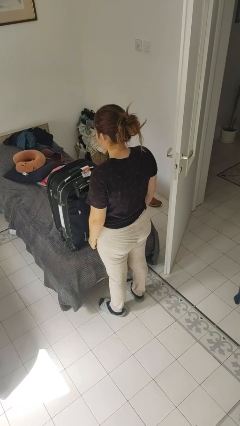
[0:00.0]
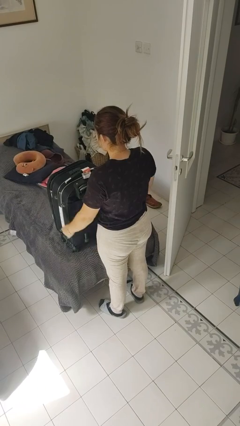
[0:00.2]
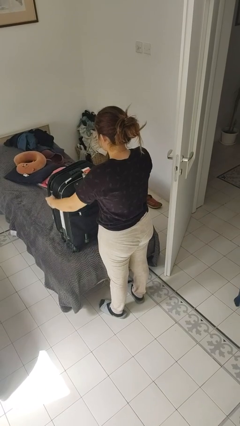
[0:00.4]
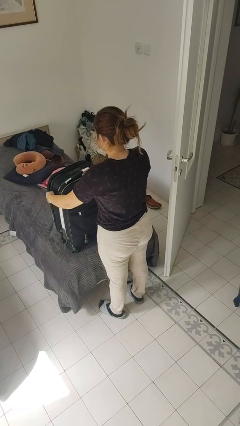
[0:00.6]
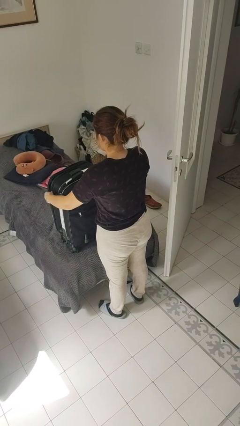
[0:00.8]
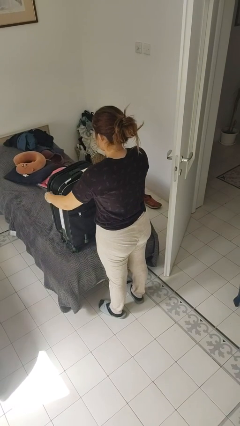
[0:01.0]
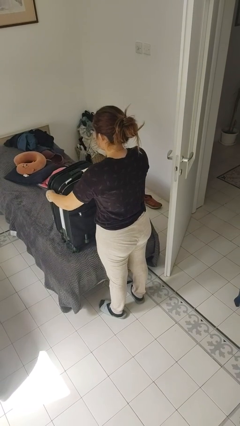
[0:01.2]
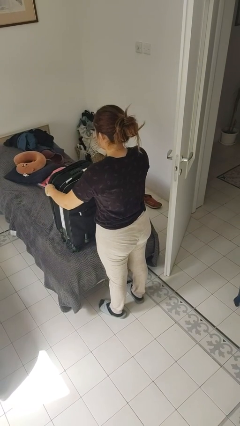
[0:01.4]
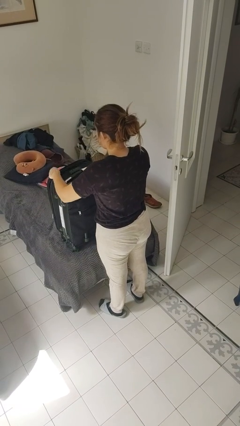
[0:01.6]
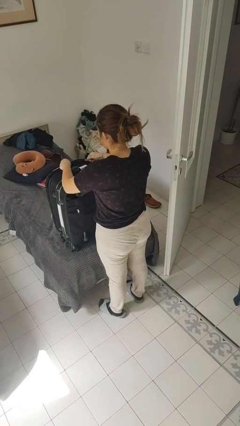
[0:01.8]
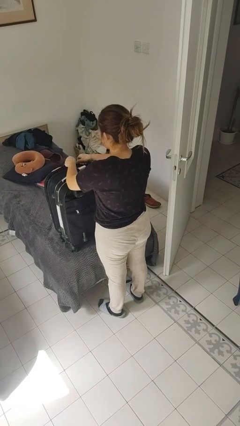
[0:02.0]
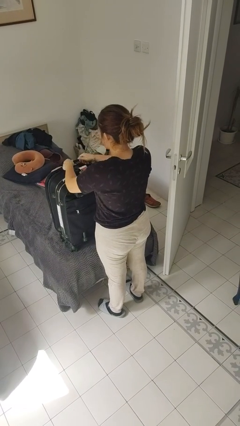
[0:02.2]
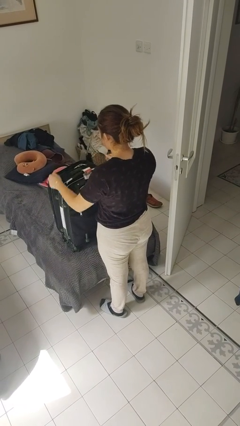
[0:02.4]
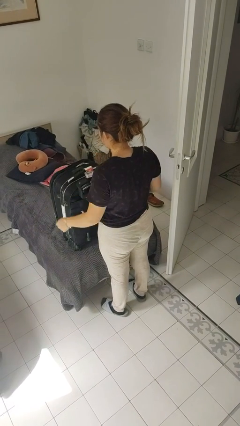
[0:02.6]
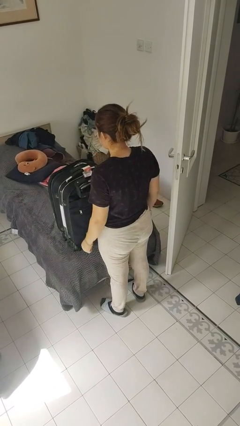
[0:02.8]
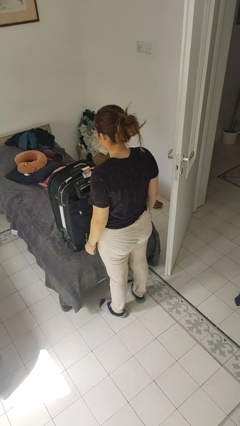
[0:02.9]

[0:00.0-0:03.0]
person closes suitcase

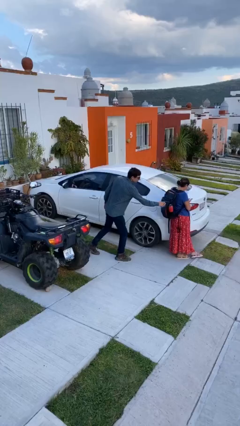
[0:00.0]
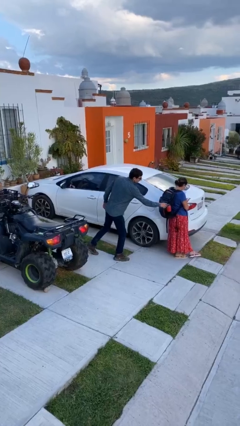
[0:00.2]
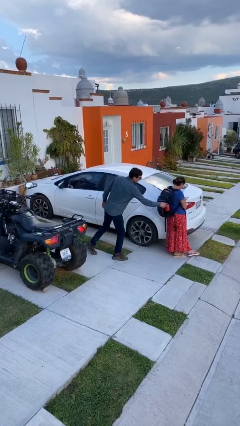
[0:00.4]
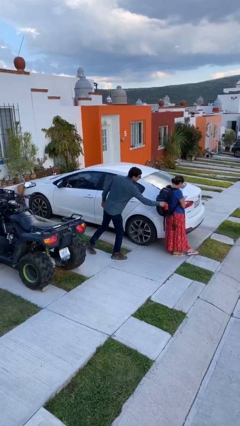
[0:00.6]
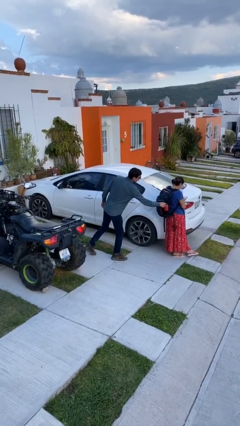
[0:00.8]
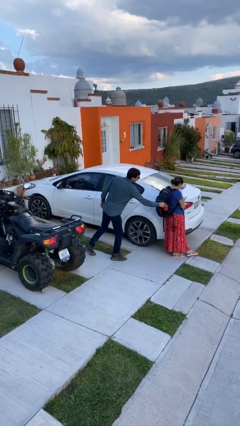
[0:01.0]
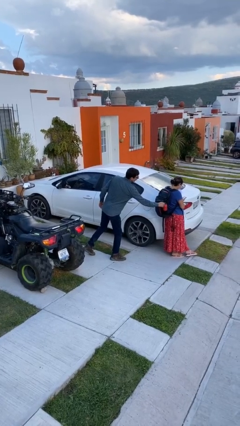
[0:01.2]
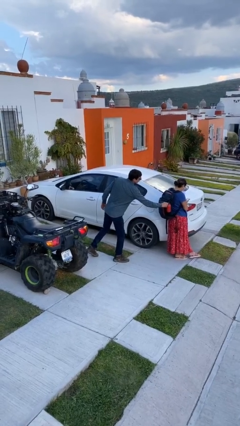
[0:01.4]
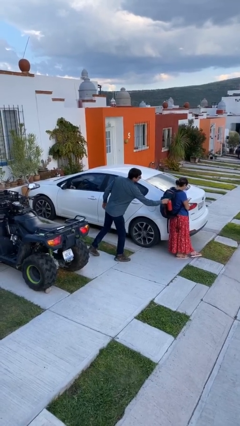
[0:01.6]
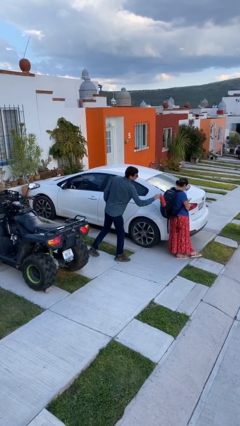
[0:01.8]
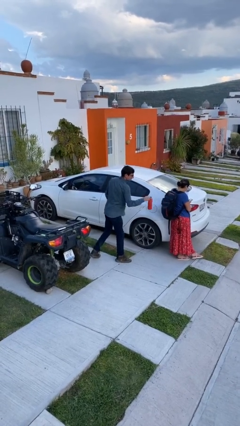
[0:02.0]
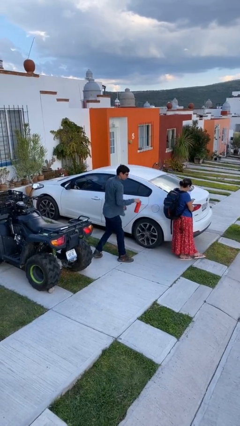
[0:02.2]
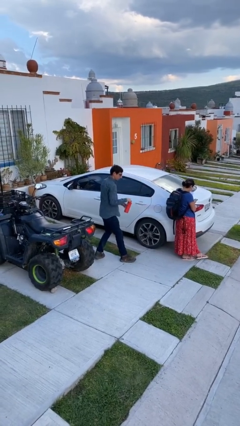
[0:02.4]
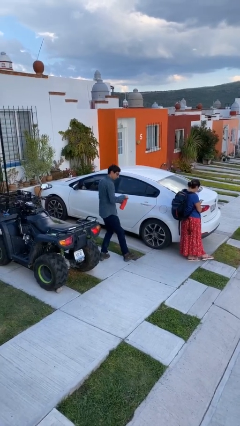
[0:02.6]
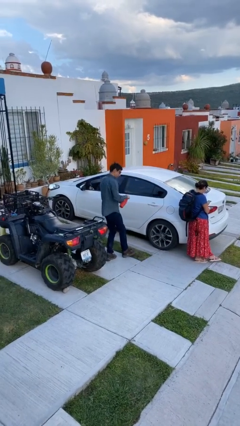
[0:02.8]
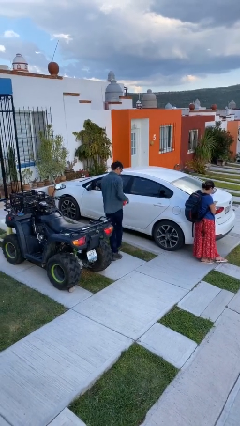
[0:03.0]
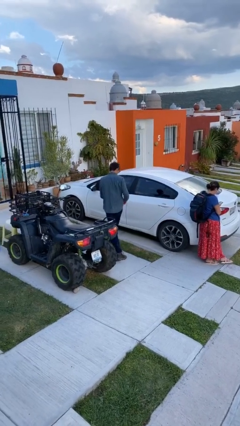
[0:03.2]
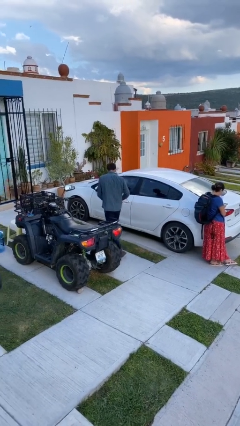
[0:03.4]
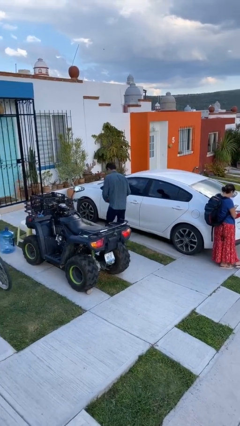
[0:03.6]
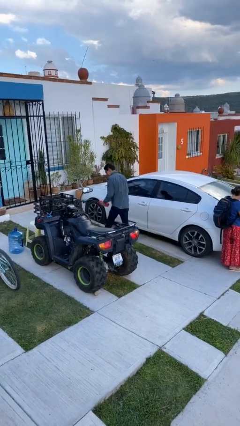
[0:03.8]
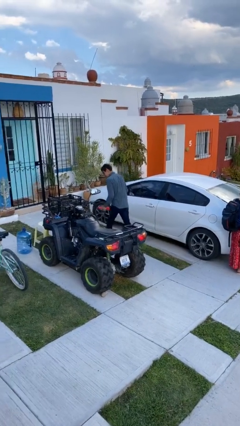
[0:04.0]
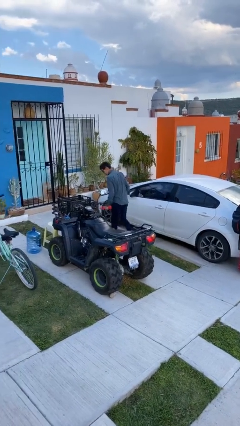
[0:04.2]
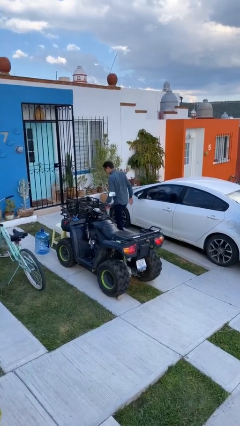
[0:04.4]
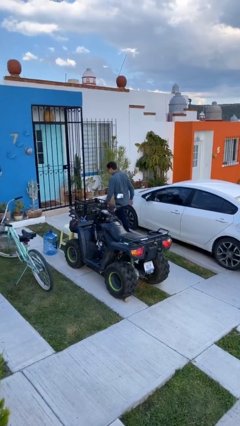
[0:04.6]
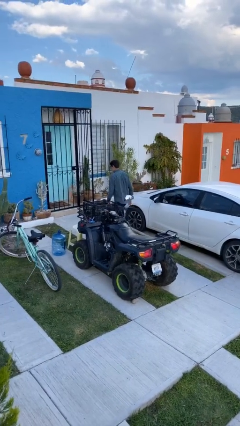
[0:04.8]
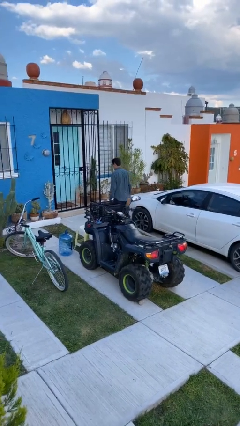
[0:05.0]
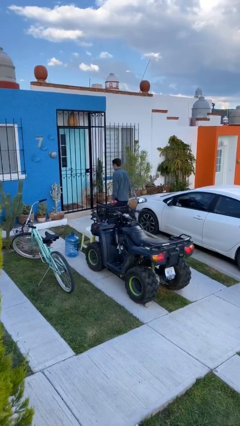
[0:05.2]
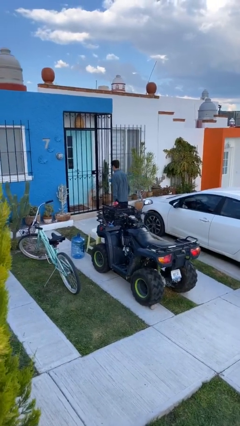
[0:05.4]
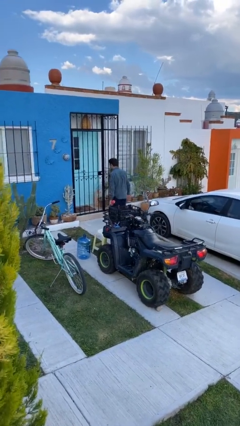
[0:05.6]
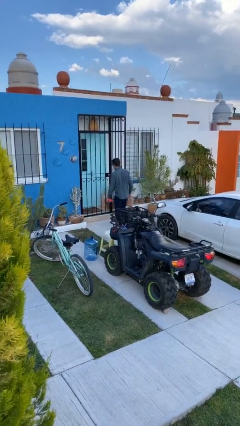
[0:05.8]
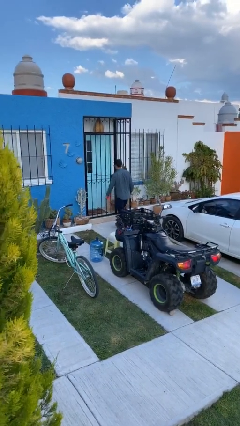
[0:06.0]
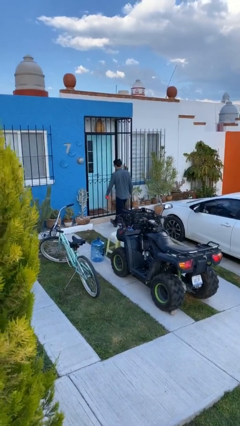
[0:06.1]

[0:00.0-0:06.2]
person steals object from person

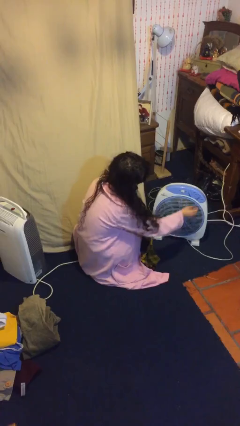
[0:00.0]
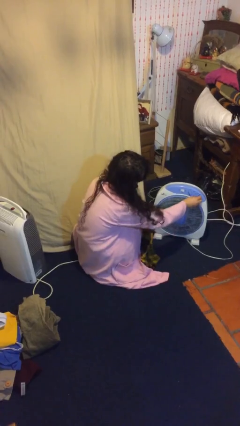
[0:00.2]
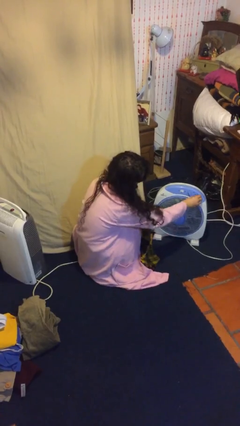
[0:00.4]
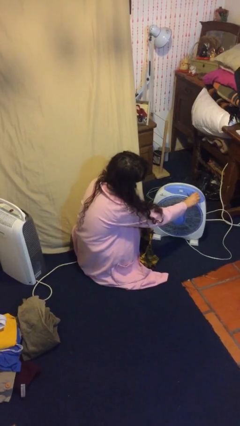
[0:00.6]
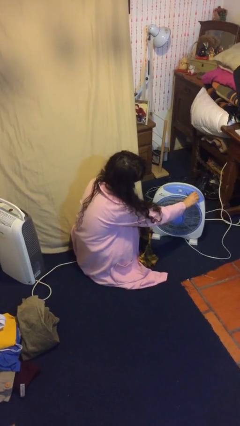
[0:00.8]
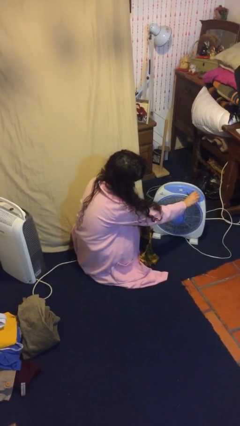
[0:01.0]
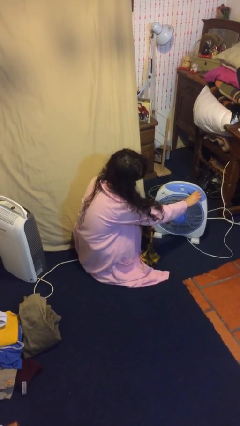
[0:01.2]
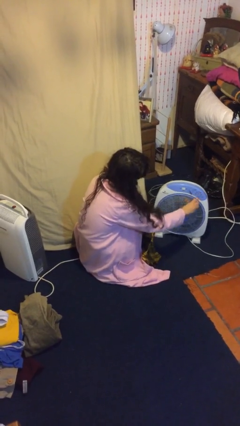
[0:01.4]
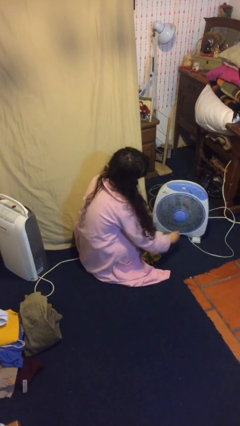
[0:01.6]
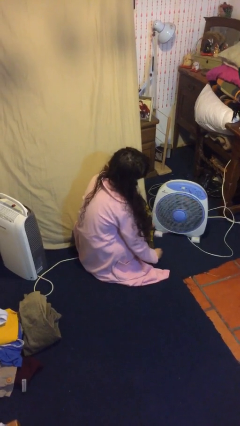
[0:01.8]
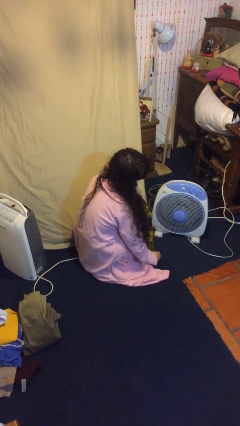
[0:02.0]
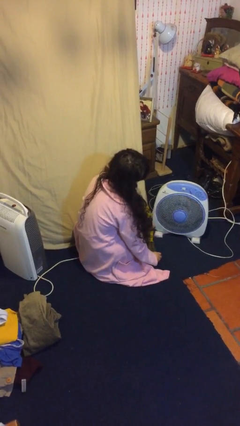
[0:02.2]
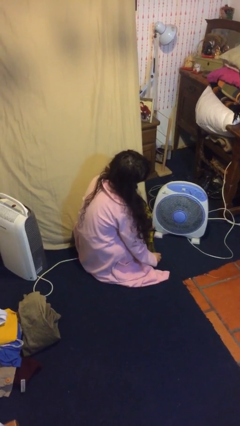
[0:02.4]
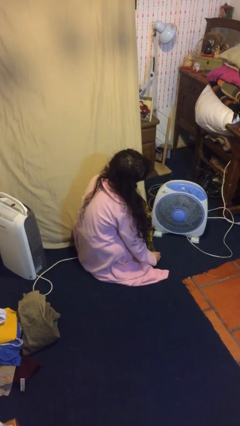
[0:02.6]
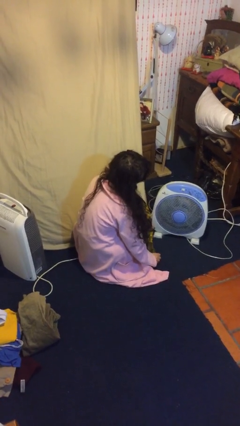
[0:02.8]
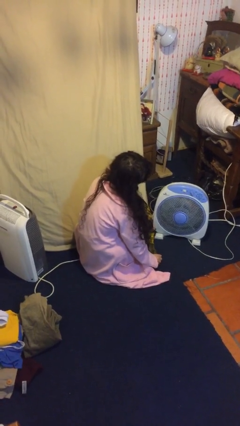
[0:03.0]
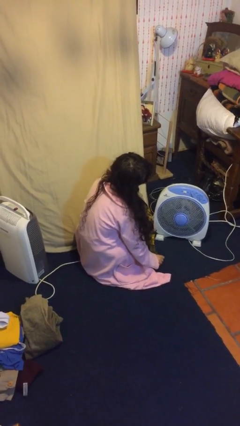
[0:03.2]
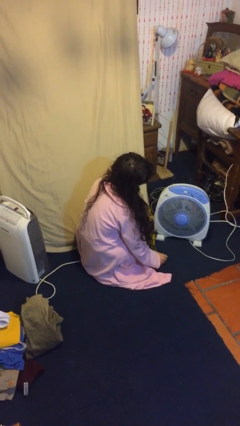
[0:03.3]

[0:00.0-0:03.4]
person turns on fan

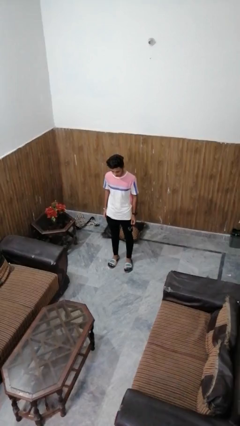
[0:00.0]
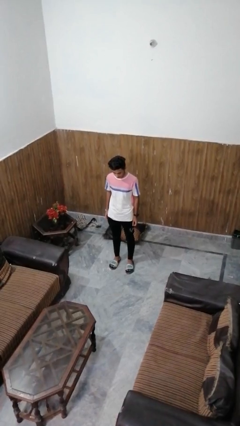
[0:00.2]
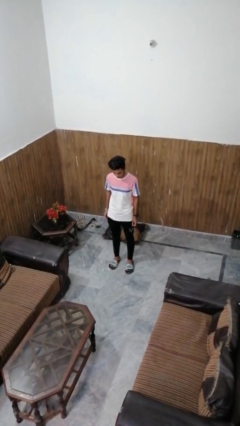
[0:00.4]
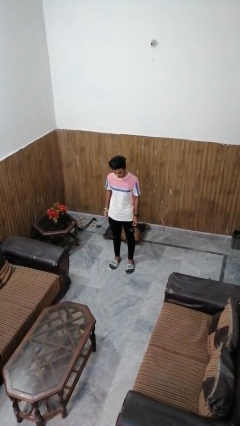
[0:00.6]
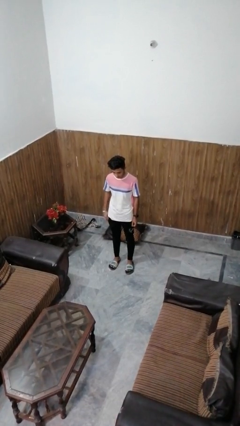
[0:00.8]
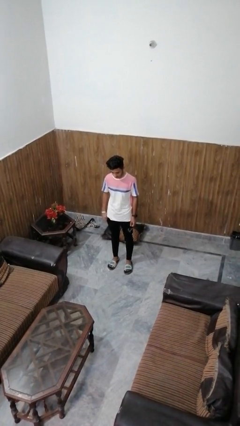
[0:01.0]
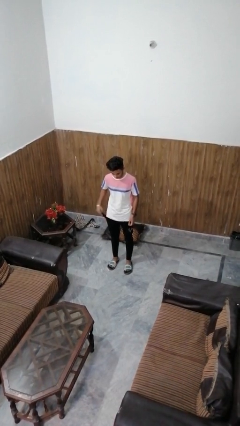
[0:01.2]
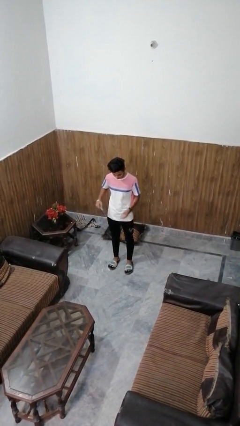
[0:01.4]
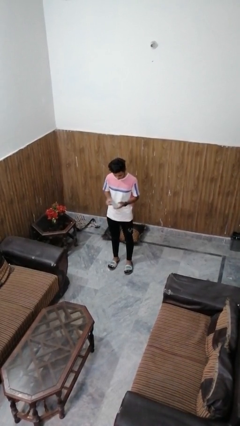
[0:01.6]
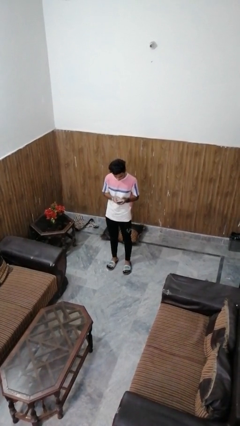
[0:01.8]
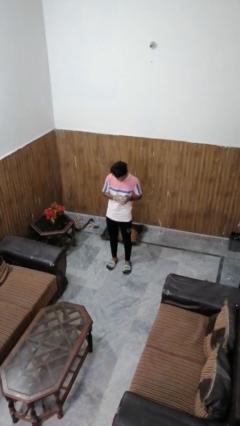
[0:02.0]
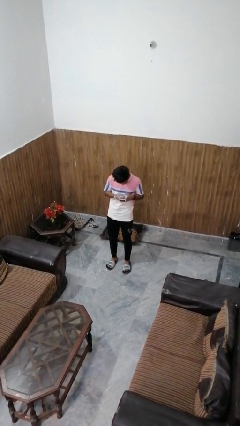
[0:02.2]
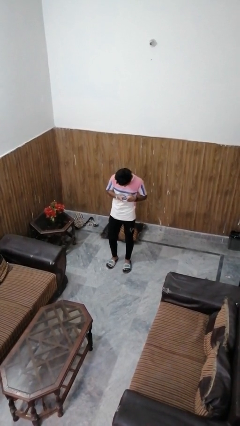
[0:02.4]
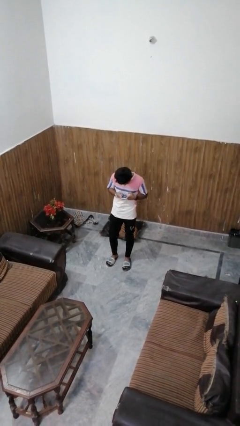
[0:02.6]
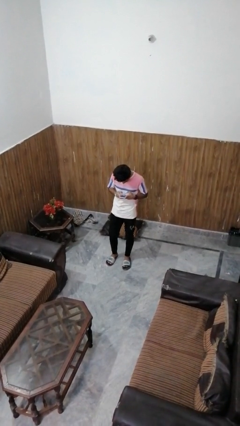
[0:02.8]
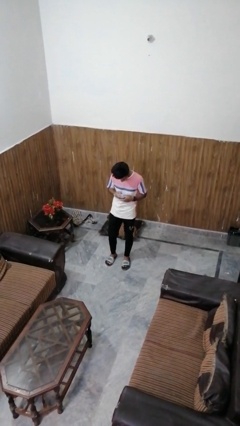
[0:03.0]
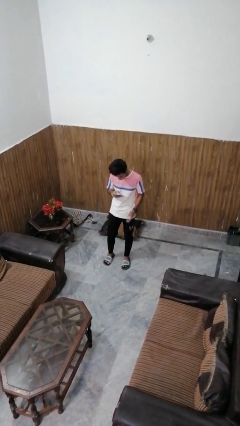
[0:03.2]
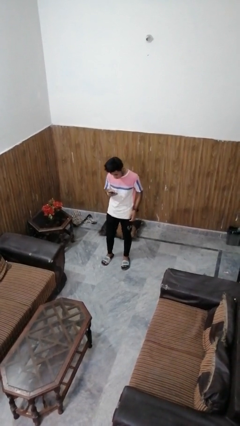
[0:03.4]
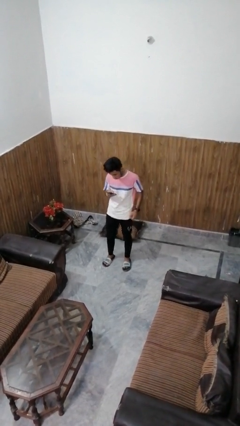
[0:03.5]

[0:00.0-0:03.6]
person takes phone from pocket

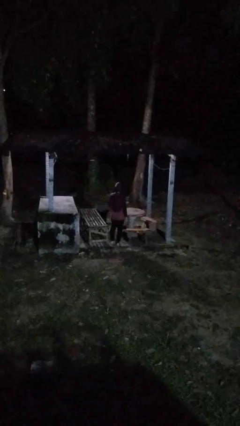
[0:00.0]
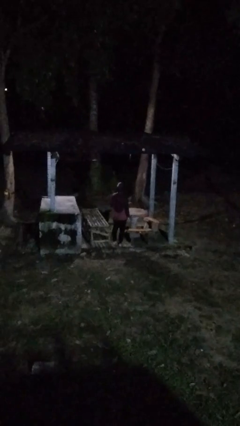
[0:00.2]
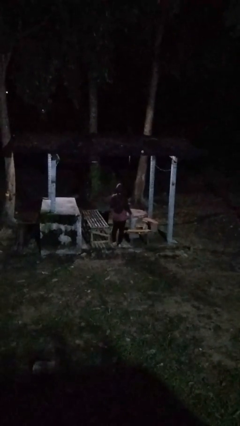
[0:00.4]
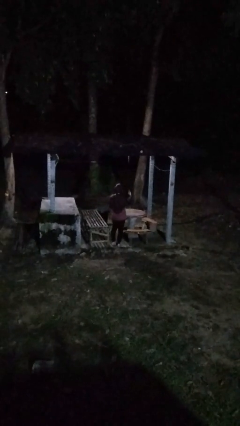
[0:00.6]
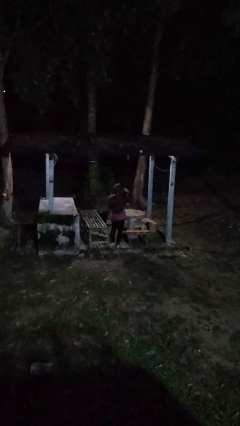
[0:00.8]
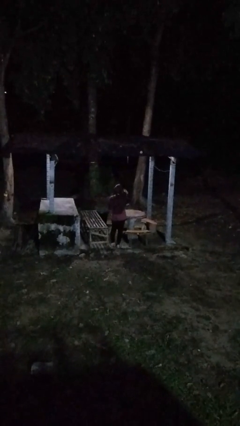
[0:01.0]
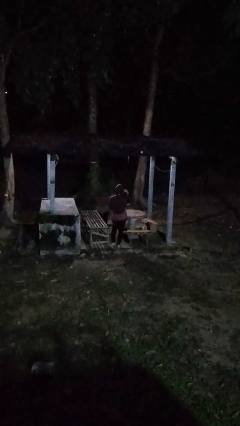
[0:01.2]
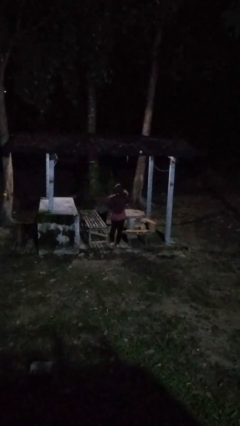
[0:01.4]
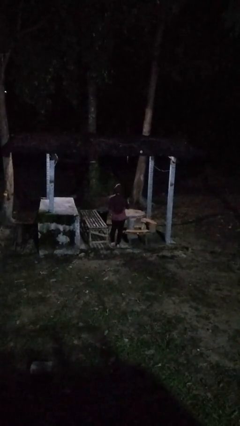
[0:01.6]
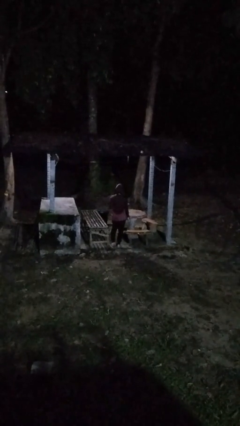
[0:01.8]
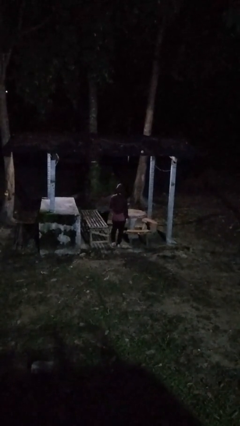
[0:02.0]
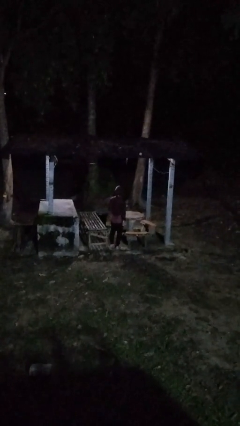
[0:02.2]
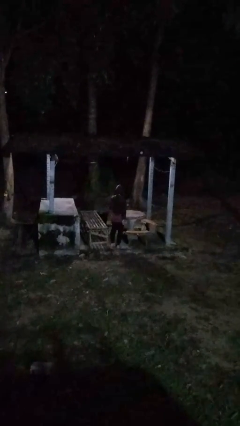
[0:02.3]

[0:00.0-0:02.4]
person gestures watch closely
